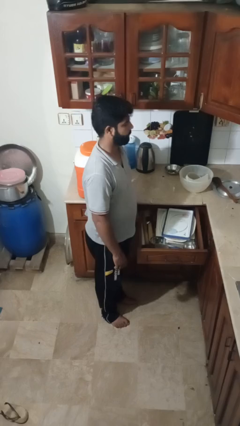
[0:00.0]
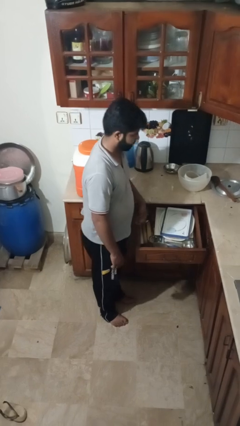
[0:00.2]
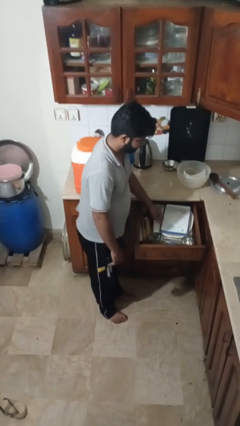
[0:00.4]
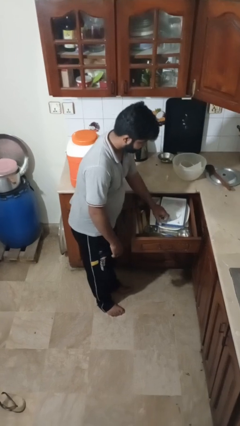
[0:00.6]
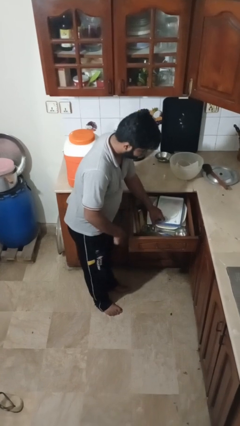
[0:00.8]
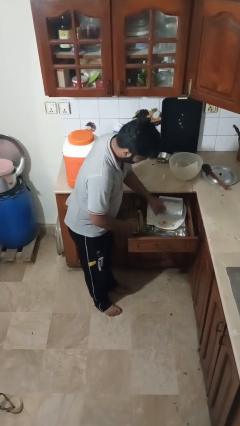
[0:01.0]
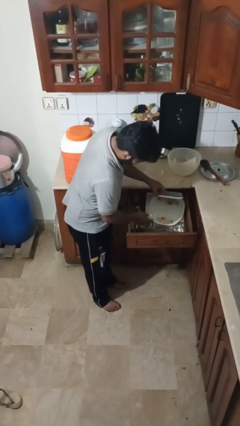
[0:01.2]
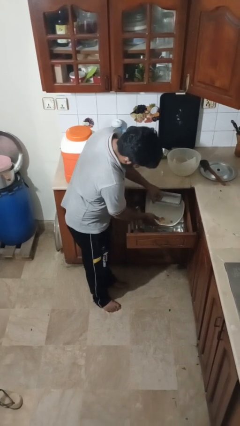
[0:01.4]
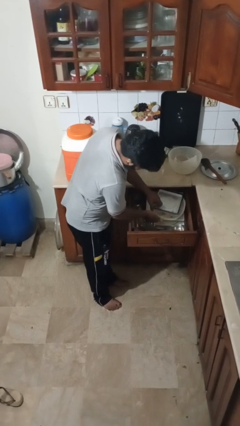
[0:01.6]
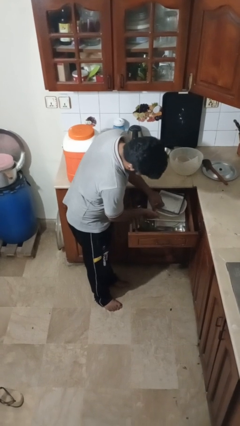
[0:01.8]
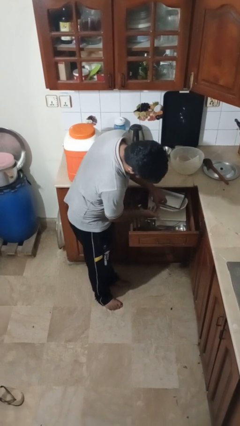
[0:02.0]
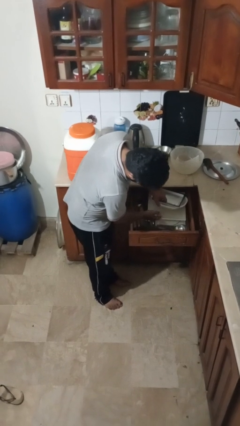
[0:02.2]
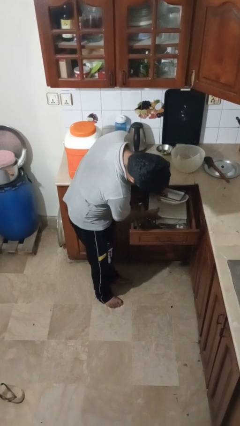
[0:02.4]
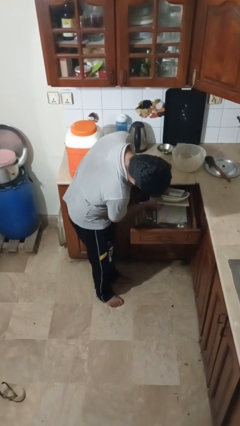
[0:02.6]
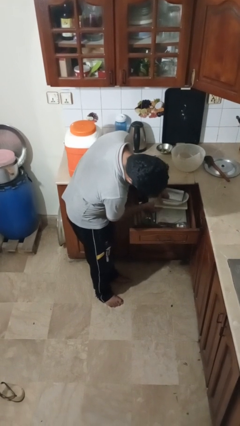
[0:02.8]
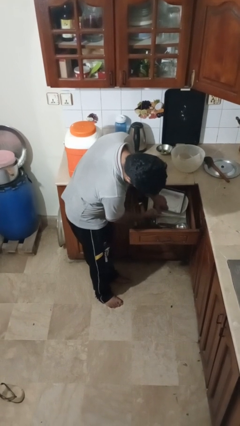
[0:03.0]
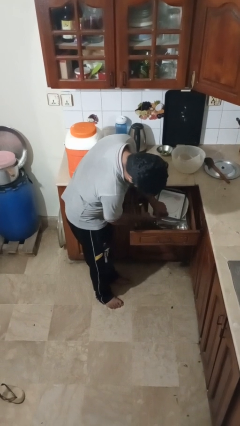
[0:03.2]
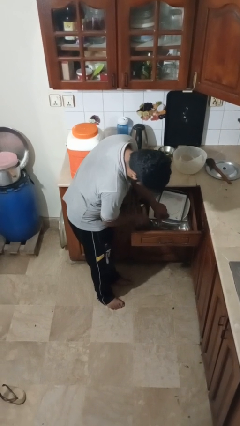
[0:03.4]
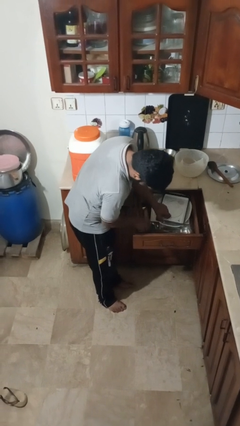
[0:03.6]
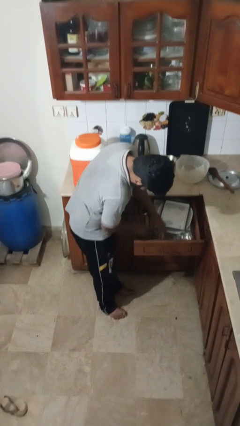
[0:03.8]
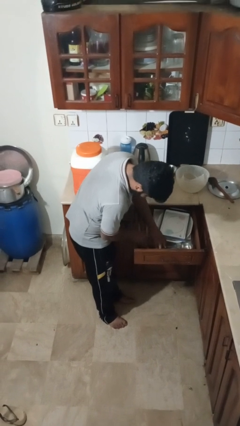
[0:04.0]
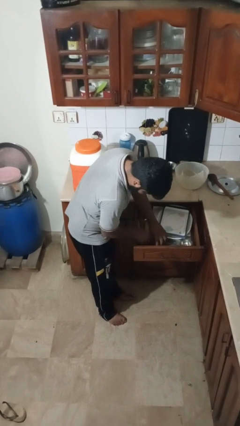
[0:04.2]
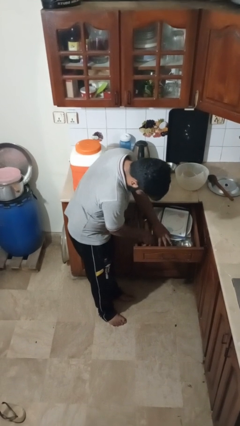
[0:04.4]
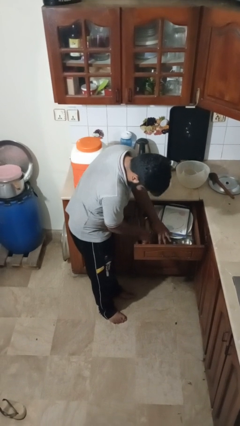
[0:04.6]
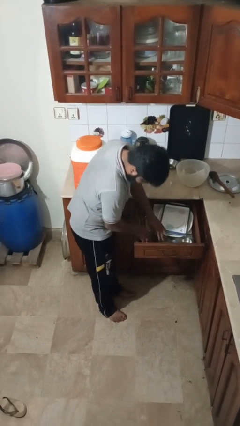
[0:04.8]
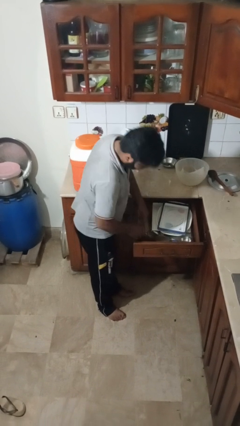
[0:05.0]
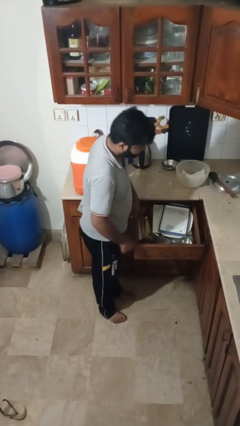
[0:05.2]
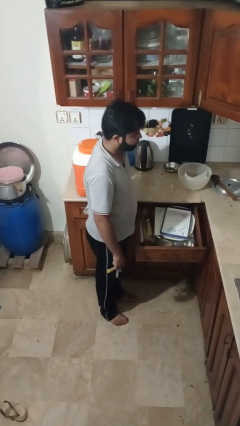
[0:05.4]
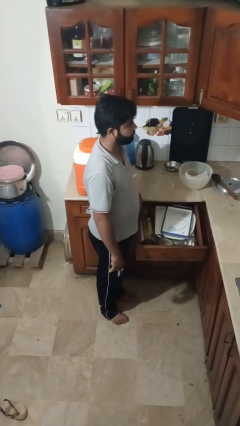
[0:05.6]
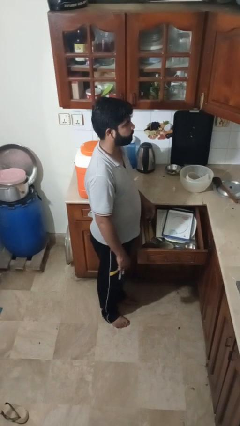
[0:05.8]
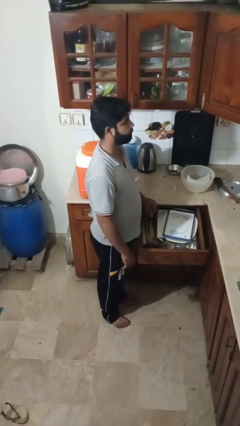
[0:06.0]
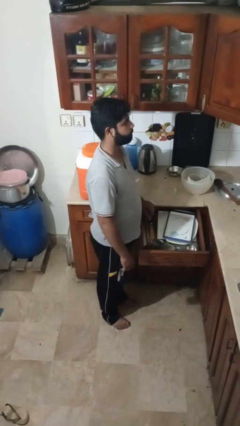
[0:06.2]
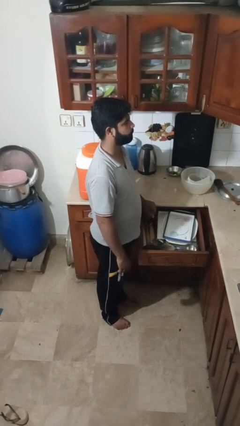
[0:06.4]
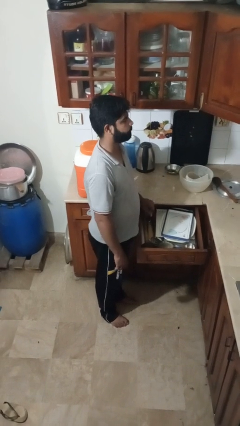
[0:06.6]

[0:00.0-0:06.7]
person searches in kitchen drawer

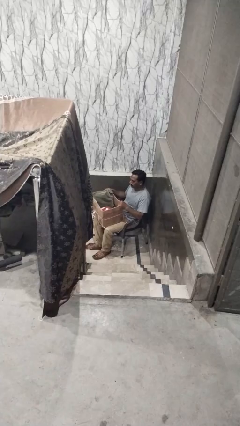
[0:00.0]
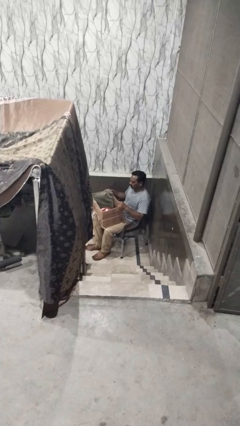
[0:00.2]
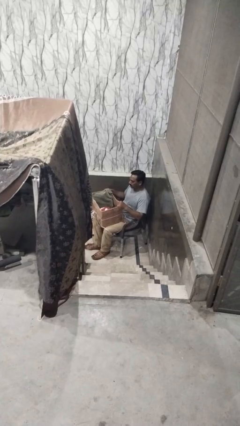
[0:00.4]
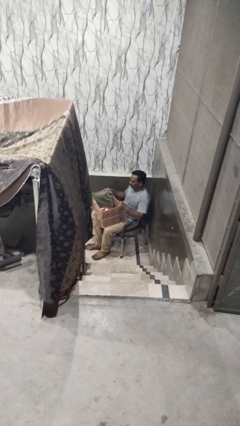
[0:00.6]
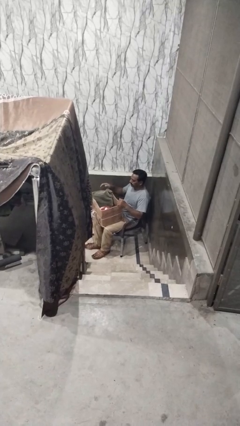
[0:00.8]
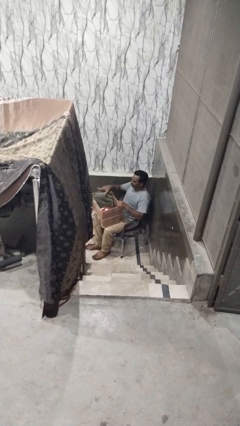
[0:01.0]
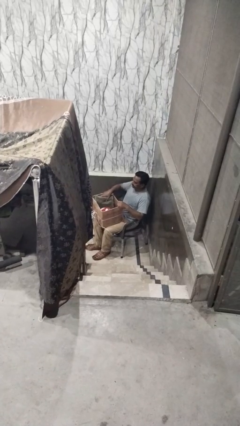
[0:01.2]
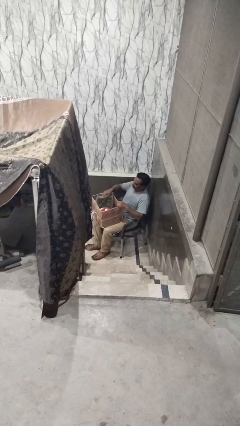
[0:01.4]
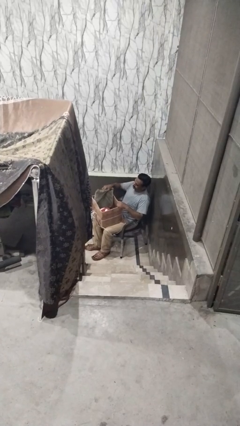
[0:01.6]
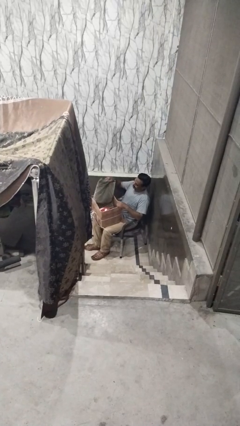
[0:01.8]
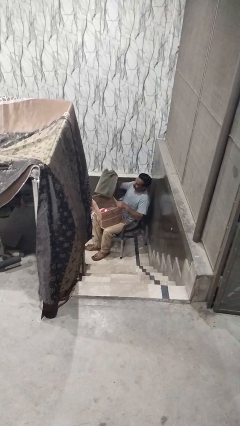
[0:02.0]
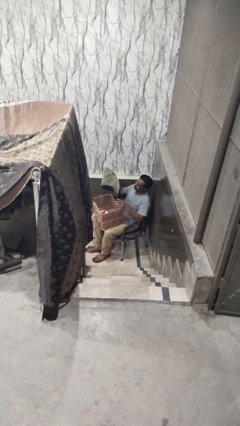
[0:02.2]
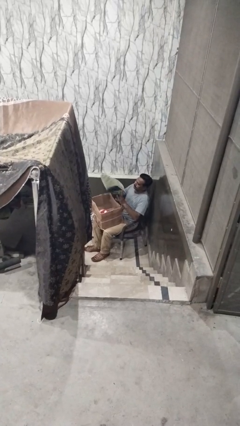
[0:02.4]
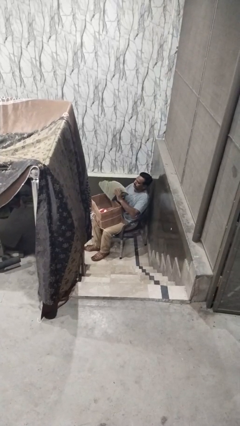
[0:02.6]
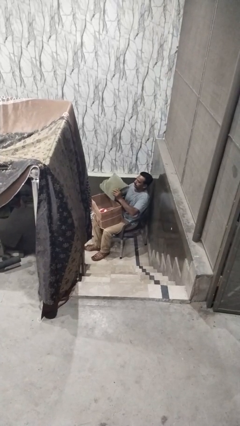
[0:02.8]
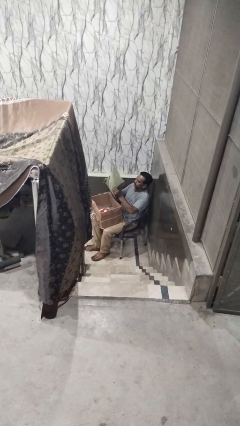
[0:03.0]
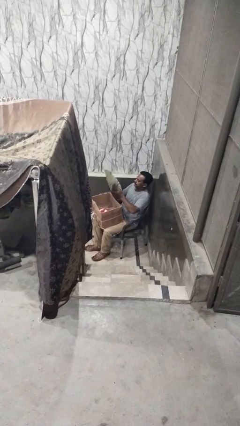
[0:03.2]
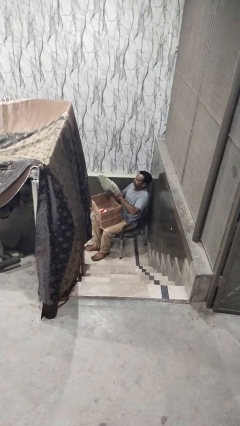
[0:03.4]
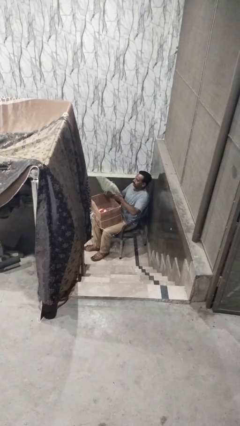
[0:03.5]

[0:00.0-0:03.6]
person takes object from box

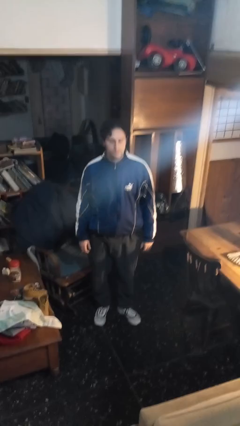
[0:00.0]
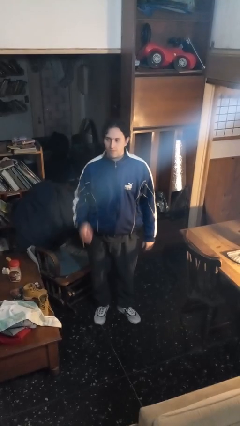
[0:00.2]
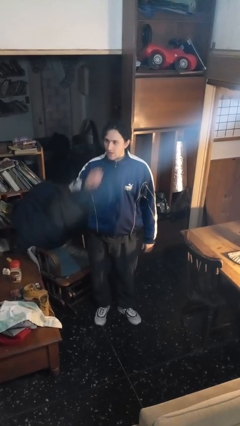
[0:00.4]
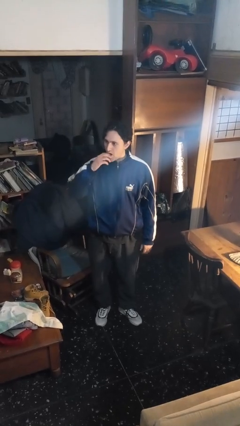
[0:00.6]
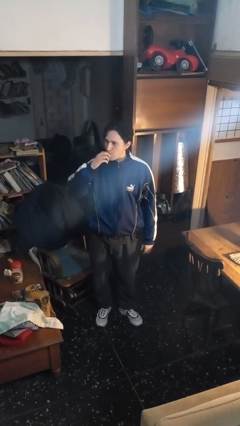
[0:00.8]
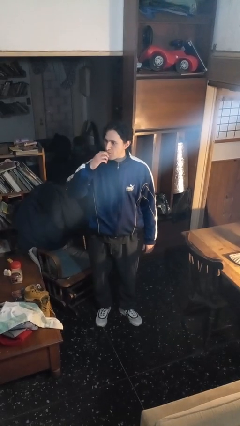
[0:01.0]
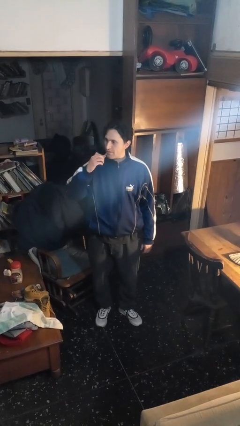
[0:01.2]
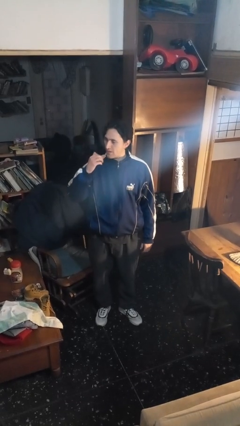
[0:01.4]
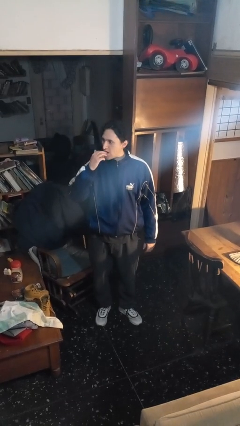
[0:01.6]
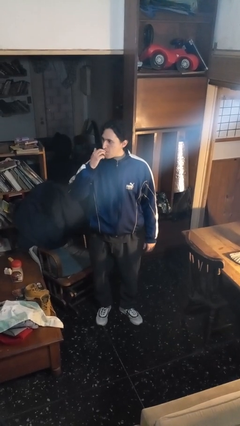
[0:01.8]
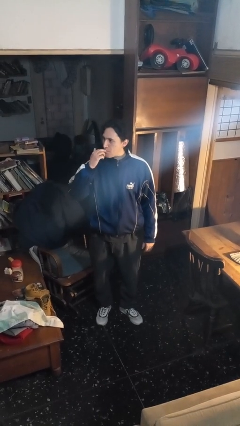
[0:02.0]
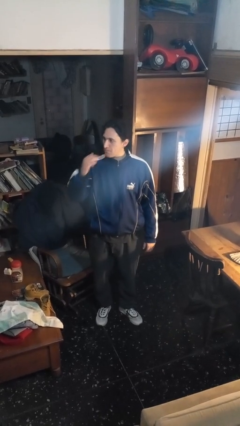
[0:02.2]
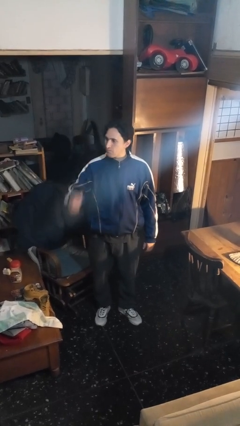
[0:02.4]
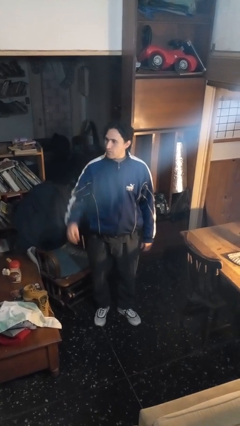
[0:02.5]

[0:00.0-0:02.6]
person licks fingers

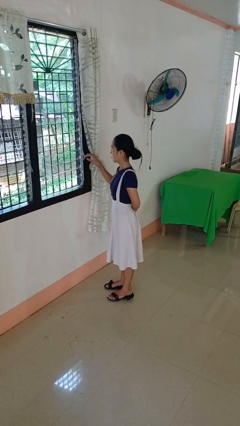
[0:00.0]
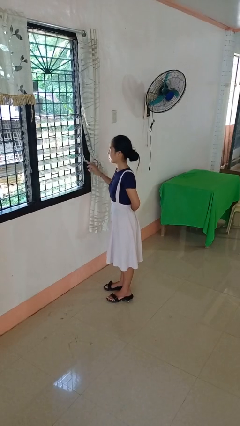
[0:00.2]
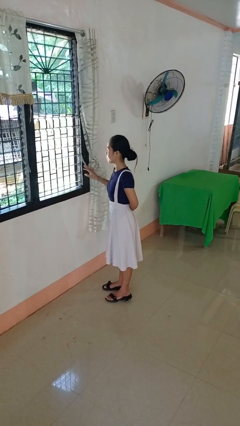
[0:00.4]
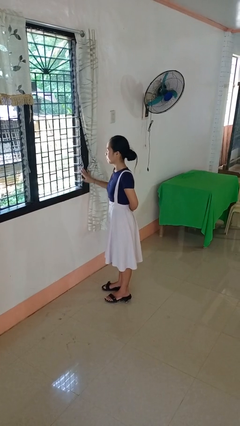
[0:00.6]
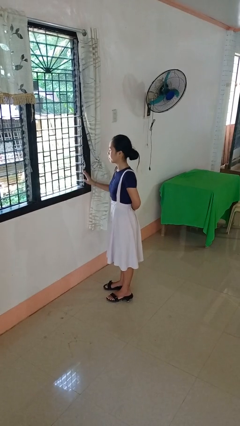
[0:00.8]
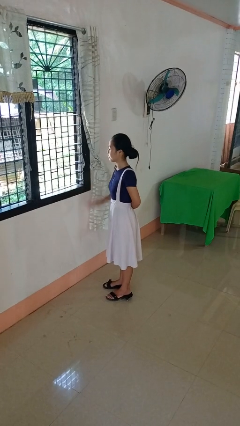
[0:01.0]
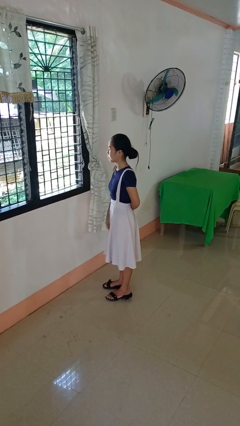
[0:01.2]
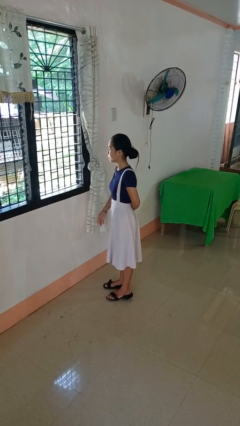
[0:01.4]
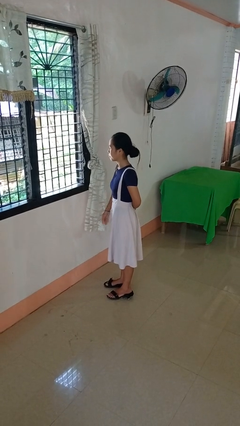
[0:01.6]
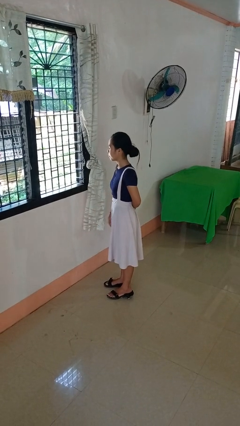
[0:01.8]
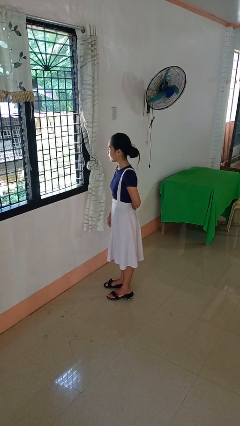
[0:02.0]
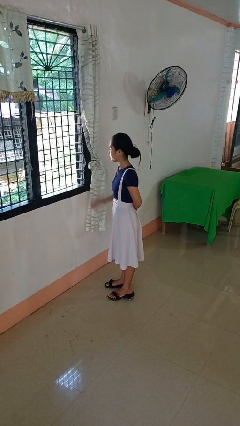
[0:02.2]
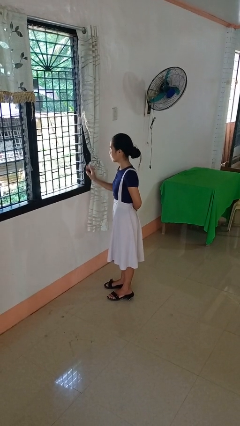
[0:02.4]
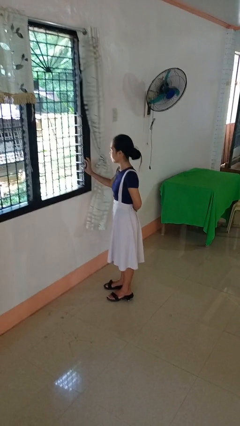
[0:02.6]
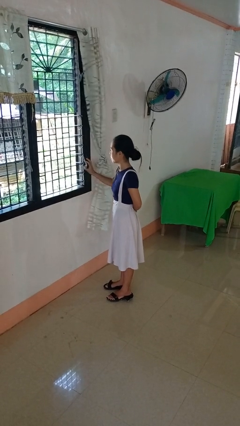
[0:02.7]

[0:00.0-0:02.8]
person opens home window

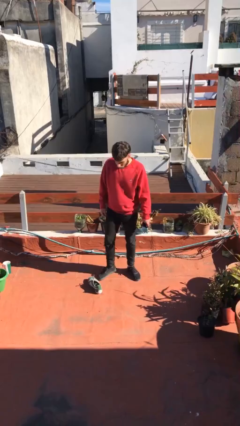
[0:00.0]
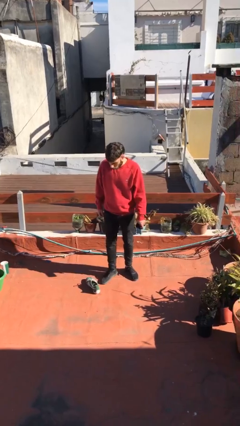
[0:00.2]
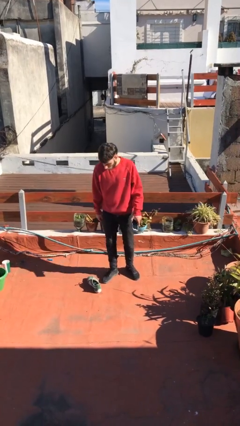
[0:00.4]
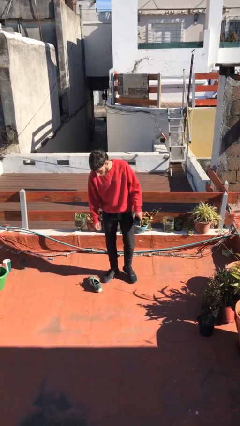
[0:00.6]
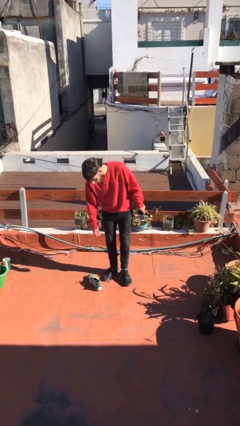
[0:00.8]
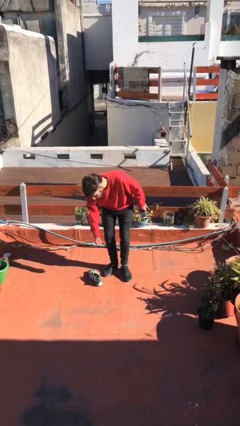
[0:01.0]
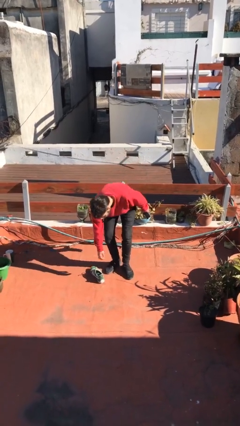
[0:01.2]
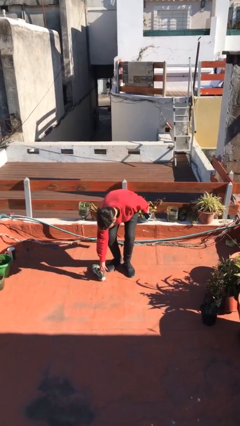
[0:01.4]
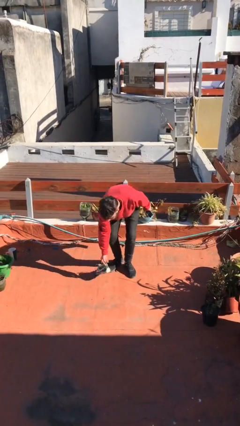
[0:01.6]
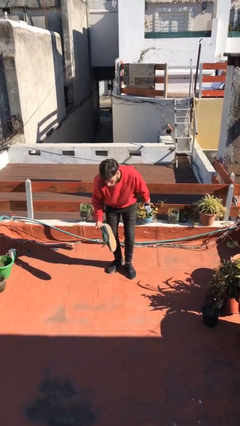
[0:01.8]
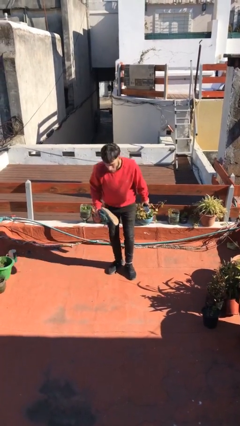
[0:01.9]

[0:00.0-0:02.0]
person picks up object from floor
